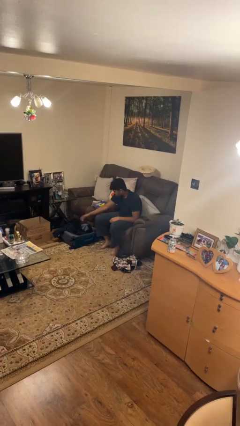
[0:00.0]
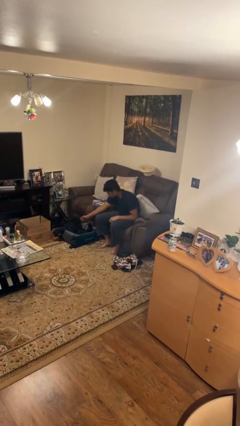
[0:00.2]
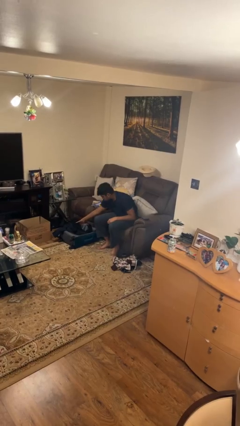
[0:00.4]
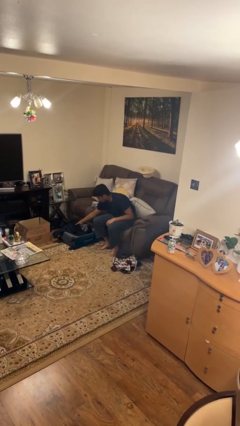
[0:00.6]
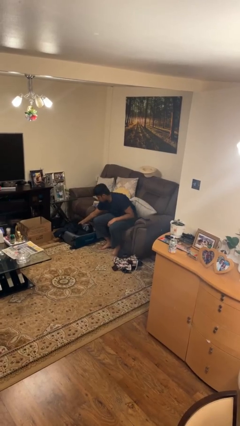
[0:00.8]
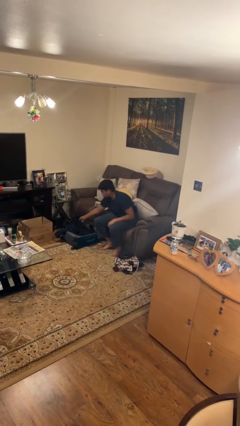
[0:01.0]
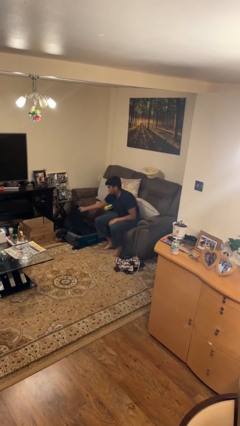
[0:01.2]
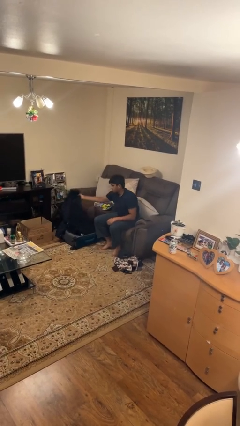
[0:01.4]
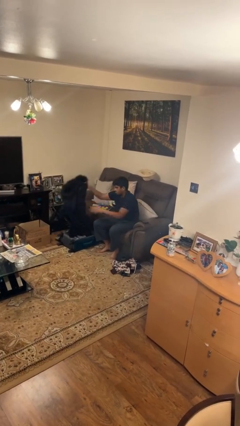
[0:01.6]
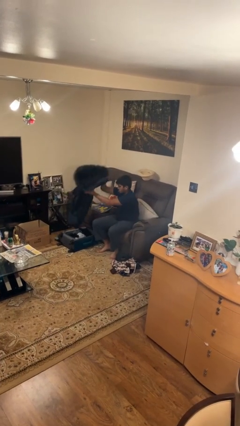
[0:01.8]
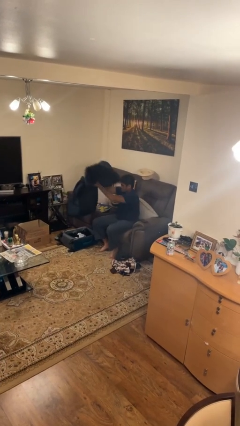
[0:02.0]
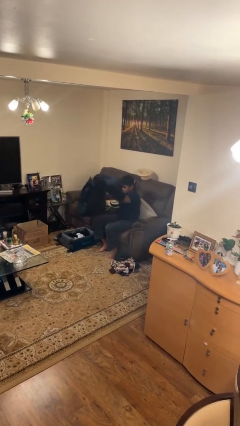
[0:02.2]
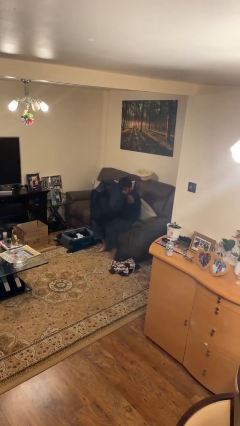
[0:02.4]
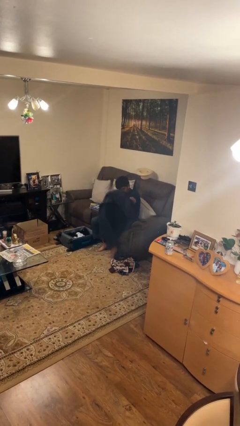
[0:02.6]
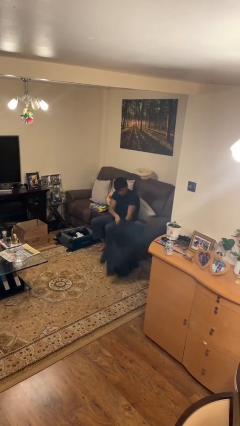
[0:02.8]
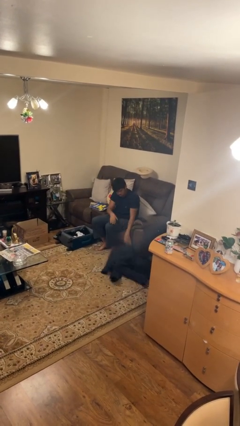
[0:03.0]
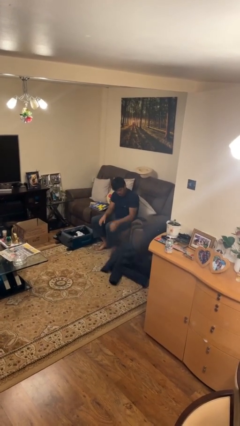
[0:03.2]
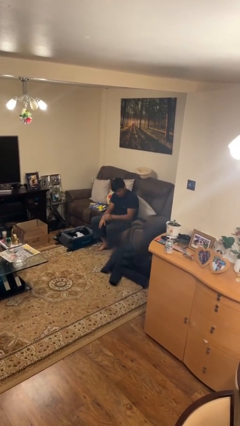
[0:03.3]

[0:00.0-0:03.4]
person unloads clothes from suitcase

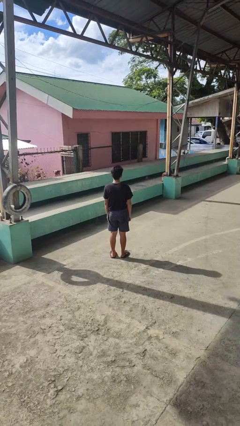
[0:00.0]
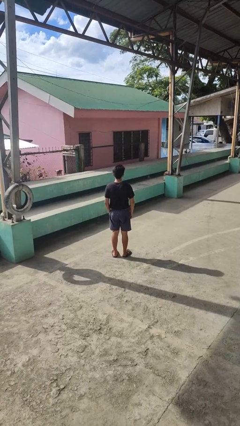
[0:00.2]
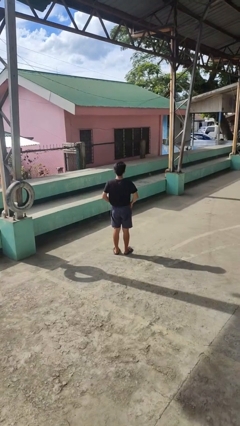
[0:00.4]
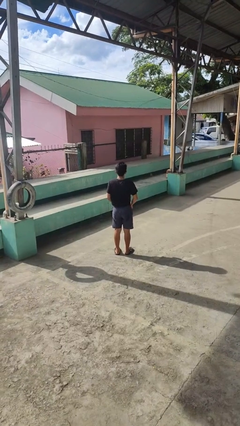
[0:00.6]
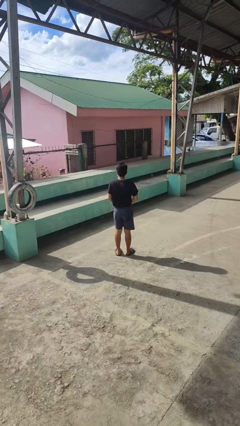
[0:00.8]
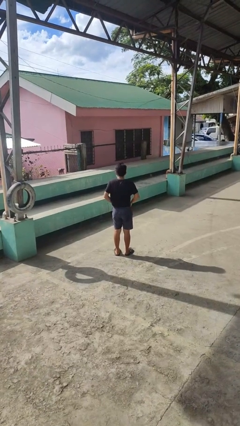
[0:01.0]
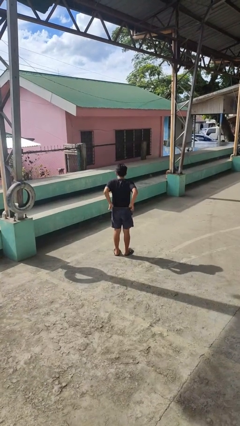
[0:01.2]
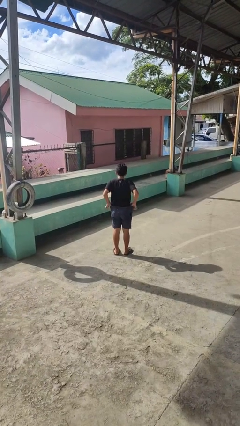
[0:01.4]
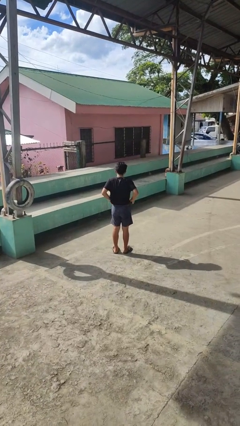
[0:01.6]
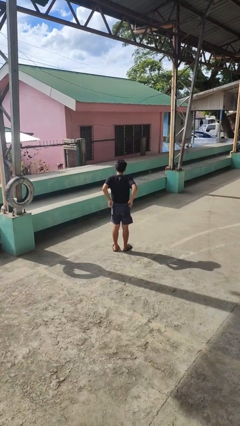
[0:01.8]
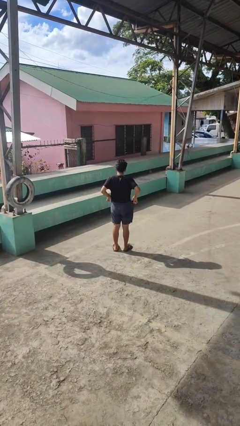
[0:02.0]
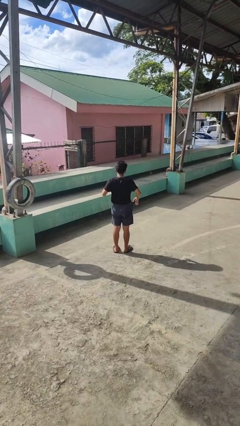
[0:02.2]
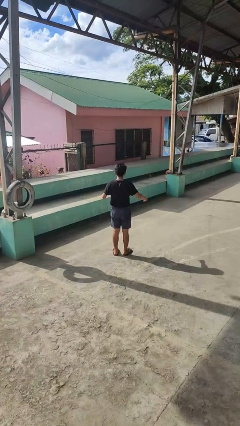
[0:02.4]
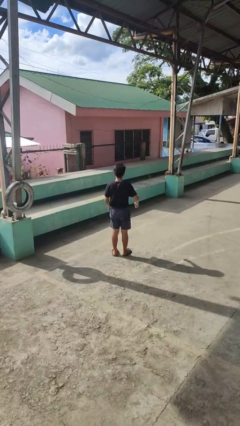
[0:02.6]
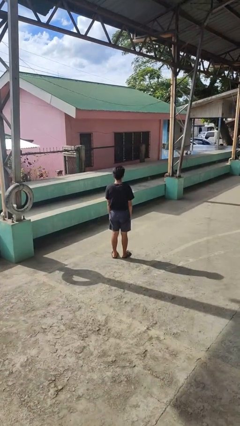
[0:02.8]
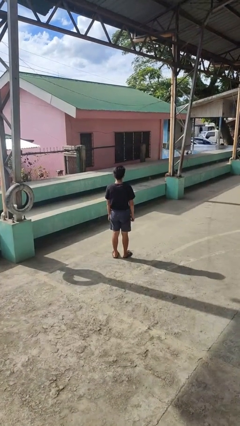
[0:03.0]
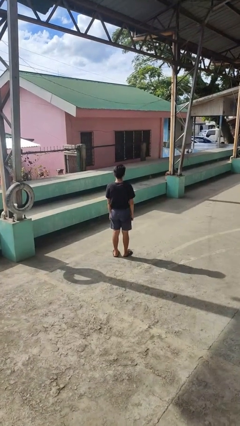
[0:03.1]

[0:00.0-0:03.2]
person hikes up pants

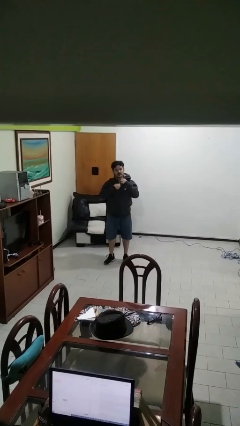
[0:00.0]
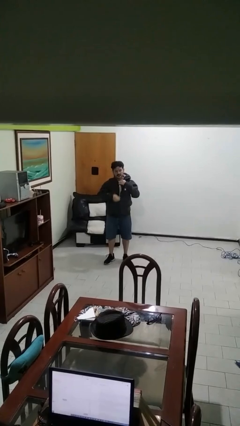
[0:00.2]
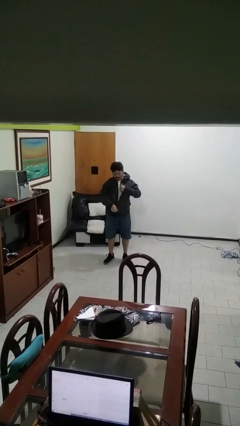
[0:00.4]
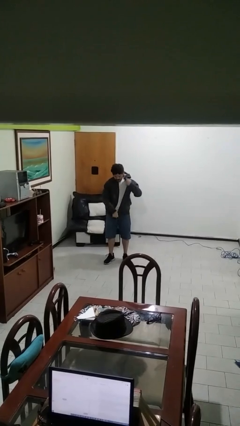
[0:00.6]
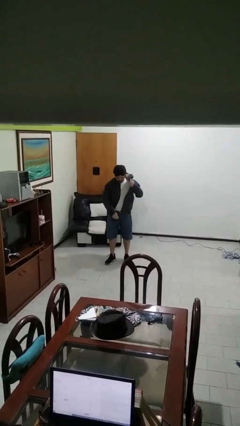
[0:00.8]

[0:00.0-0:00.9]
person unzips jacket

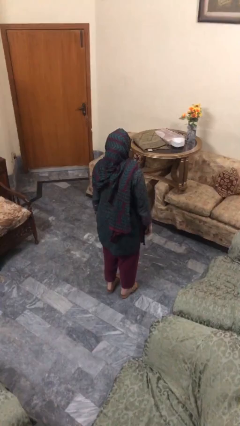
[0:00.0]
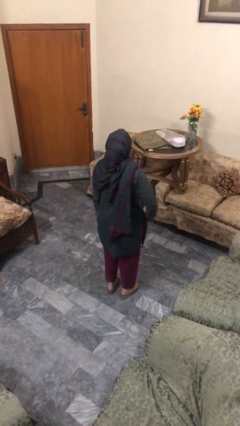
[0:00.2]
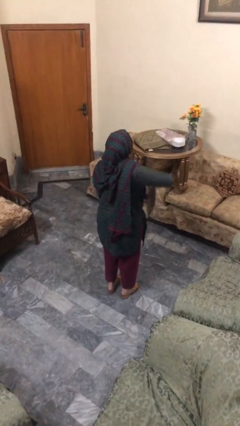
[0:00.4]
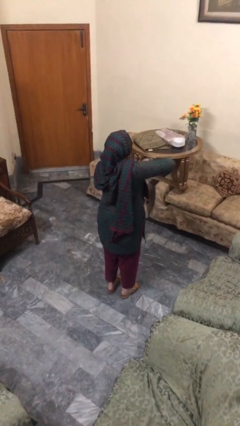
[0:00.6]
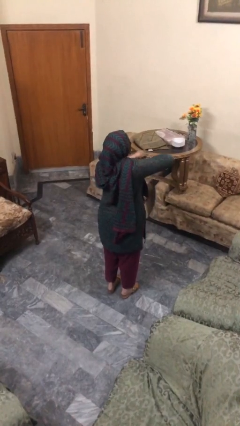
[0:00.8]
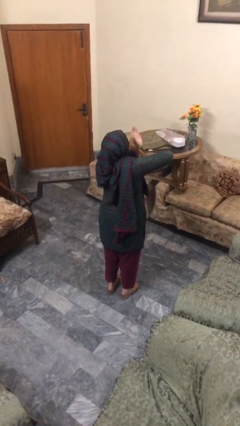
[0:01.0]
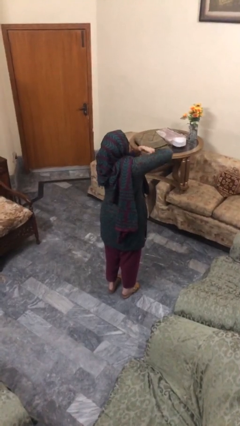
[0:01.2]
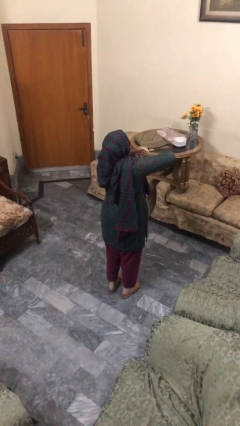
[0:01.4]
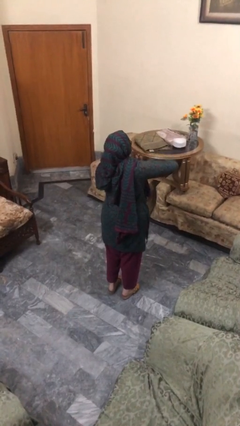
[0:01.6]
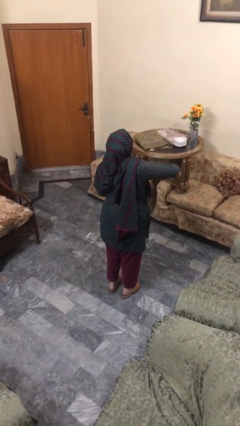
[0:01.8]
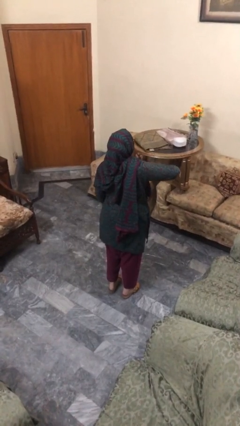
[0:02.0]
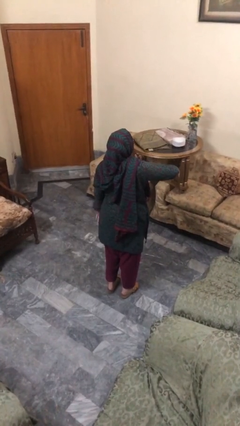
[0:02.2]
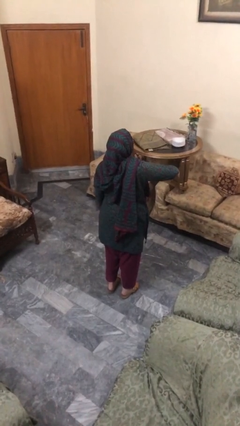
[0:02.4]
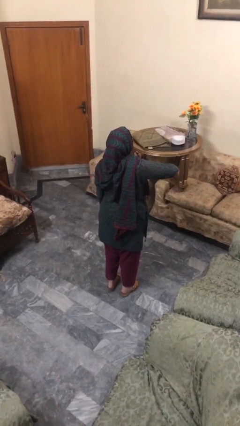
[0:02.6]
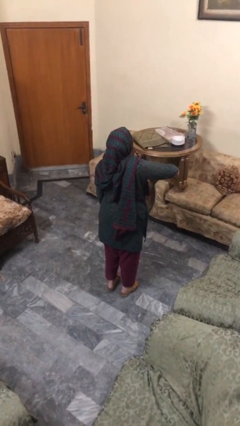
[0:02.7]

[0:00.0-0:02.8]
person swats bug

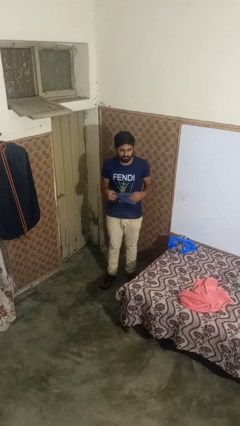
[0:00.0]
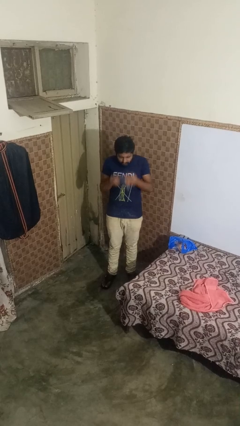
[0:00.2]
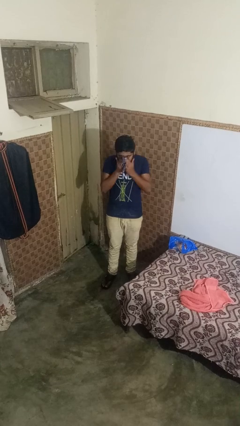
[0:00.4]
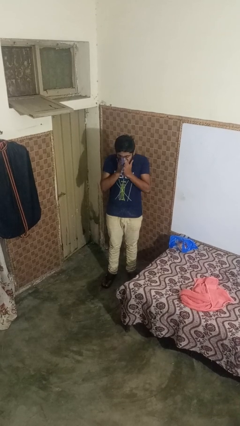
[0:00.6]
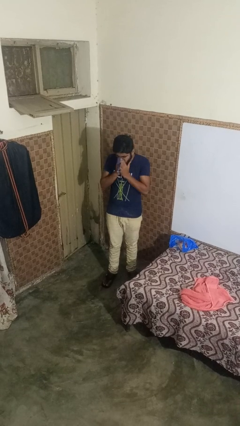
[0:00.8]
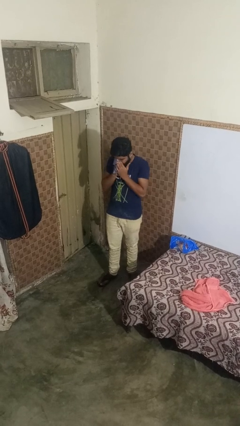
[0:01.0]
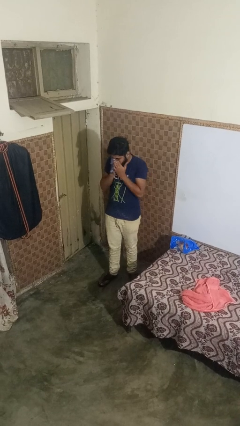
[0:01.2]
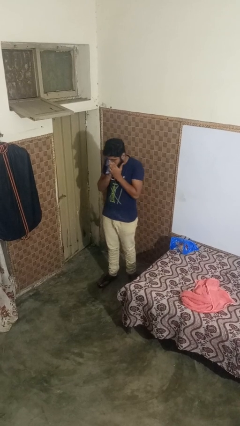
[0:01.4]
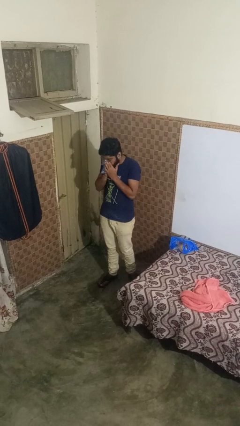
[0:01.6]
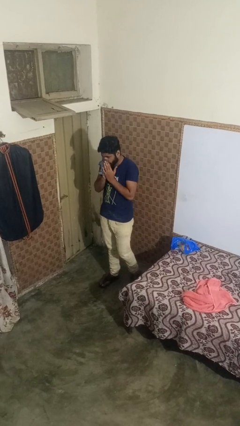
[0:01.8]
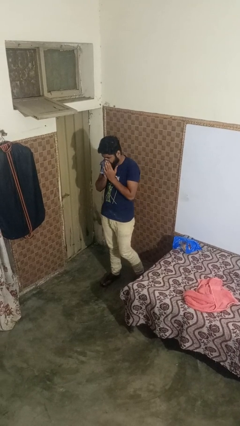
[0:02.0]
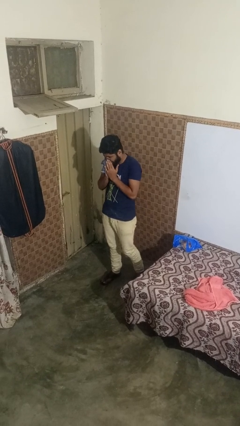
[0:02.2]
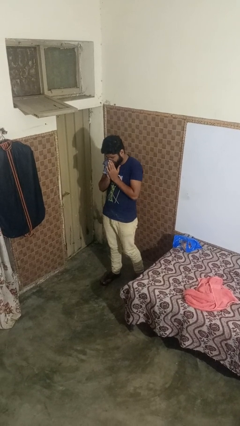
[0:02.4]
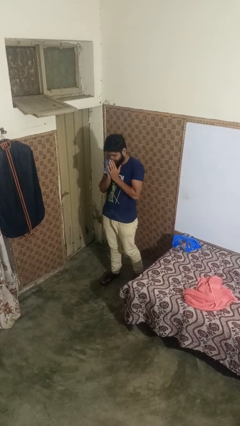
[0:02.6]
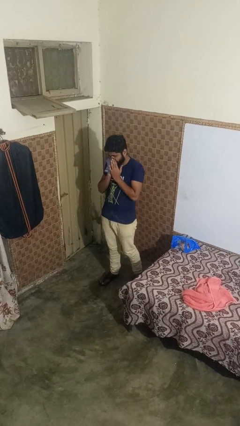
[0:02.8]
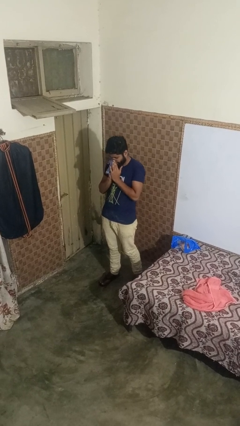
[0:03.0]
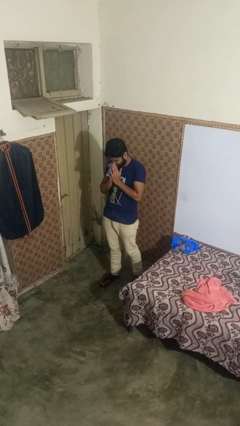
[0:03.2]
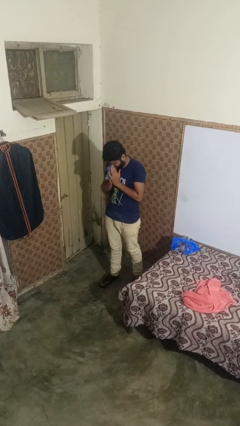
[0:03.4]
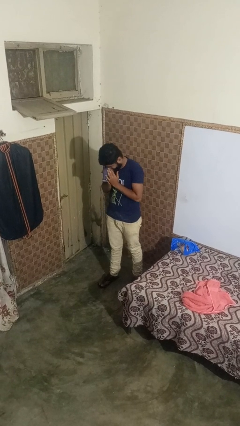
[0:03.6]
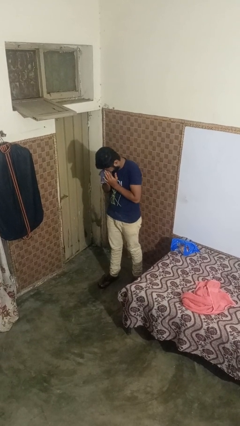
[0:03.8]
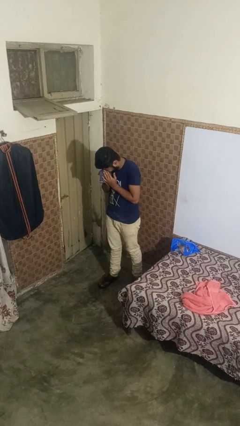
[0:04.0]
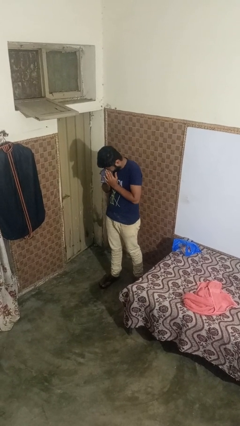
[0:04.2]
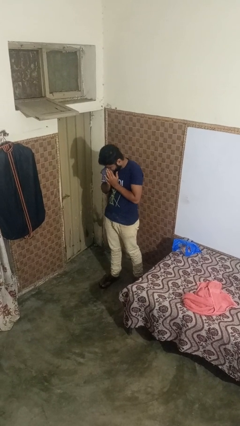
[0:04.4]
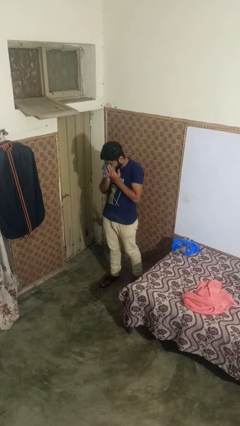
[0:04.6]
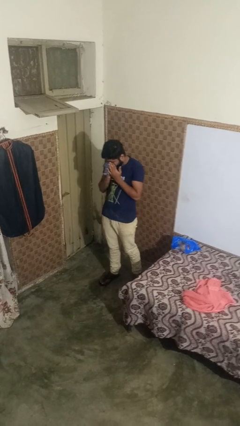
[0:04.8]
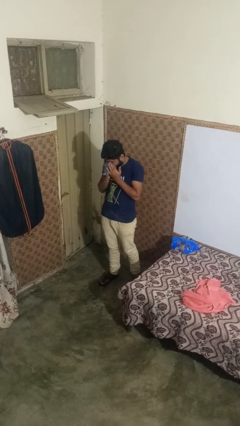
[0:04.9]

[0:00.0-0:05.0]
person blows nose

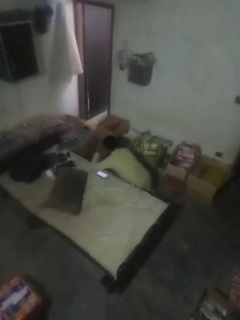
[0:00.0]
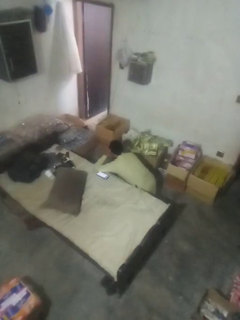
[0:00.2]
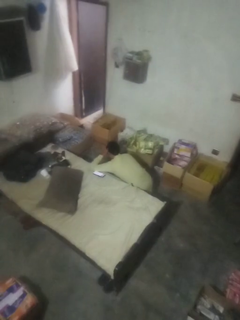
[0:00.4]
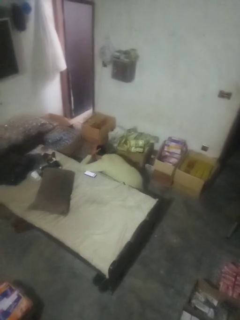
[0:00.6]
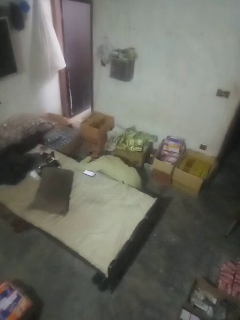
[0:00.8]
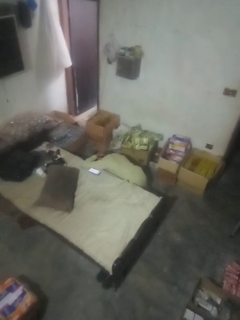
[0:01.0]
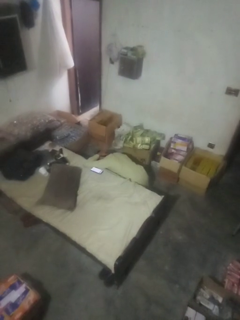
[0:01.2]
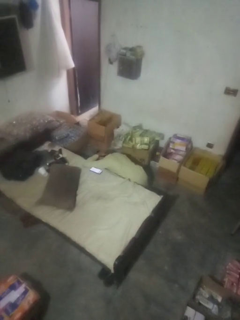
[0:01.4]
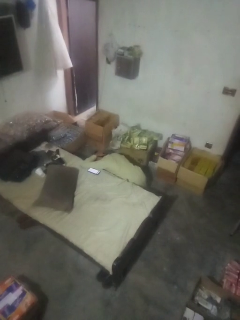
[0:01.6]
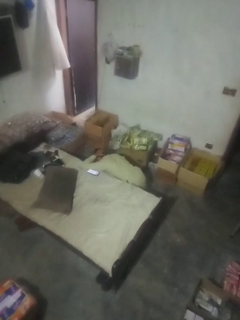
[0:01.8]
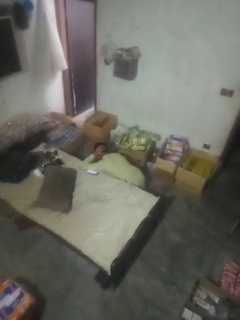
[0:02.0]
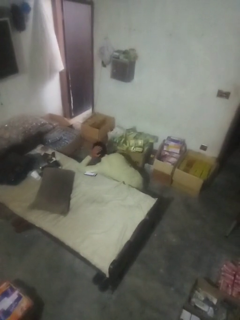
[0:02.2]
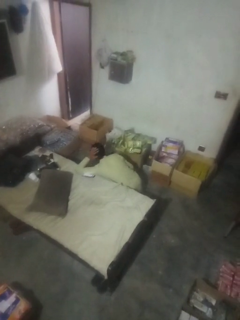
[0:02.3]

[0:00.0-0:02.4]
person searches under bed

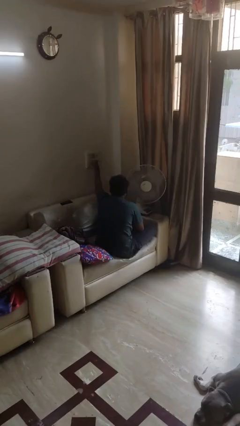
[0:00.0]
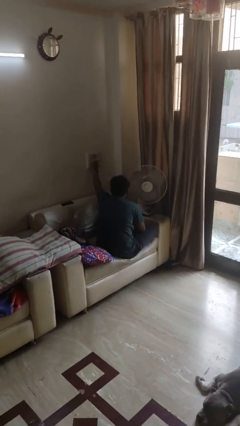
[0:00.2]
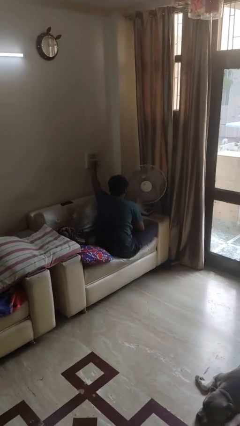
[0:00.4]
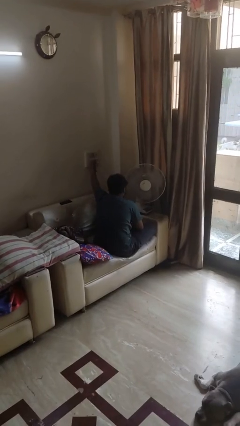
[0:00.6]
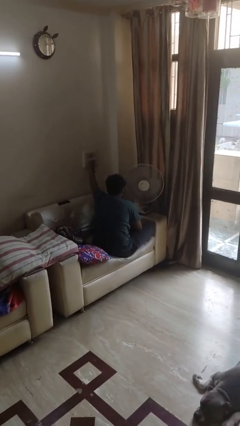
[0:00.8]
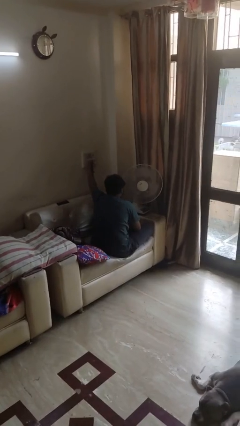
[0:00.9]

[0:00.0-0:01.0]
person turns on fan
